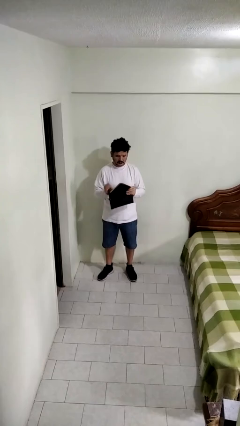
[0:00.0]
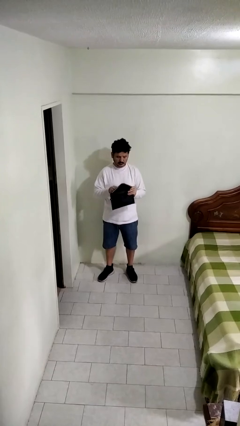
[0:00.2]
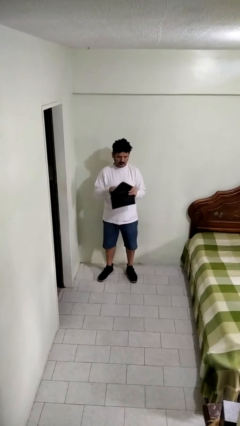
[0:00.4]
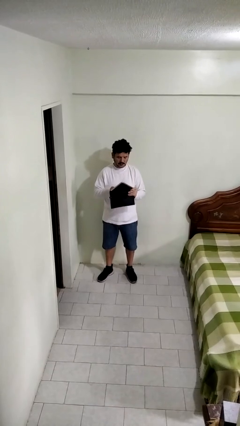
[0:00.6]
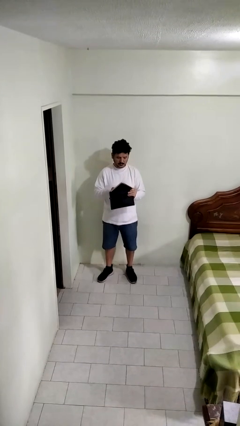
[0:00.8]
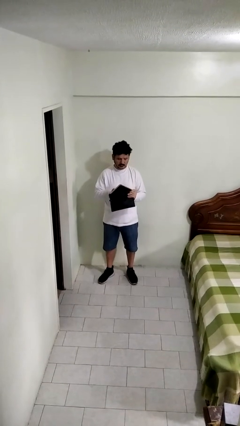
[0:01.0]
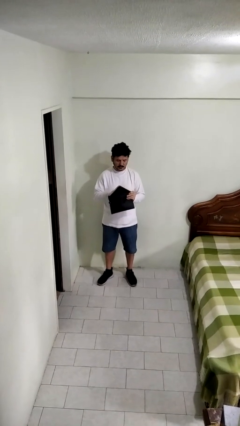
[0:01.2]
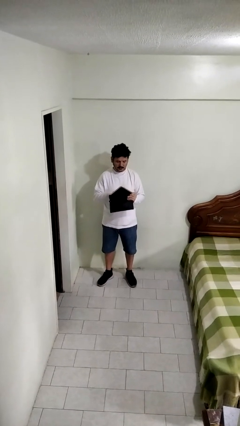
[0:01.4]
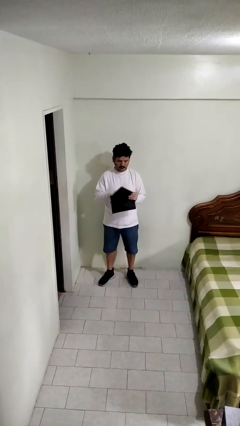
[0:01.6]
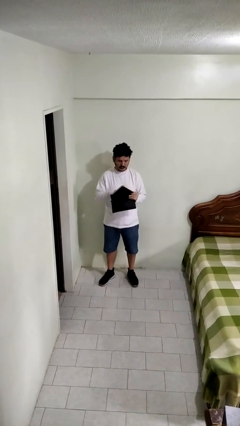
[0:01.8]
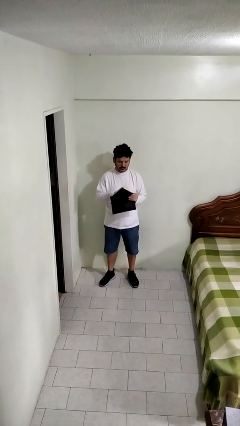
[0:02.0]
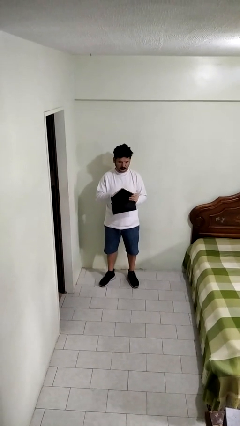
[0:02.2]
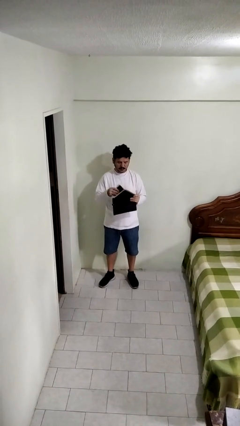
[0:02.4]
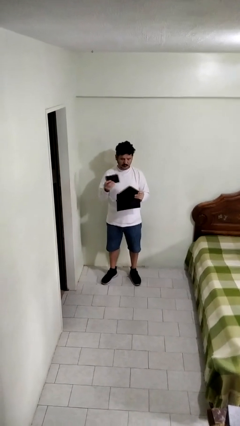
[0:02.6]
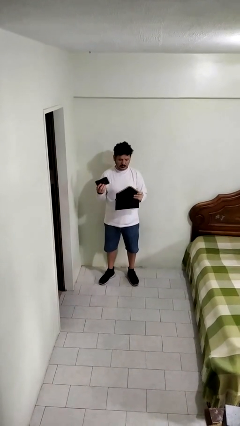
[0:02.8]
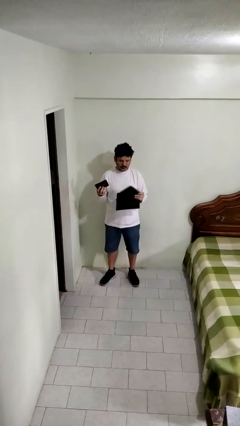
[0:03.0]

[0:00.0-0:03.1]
person searches in purse

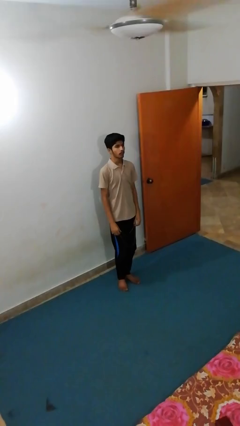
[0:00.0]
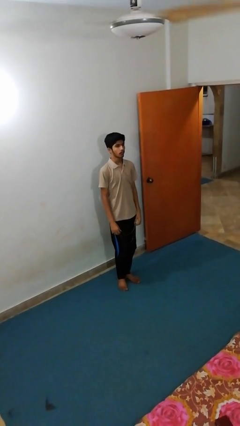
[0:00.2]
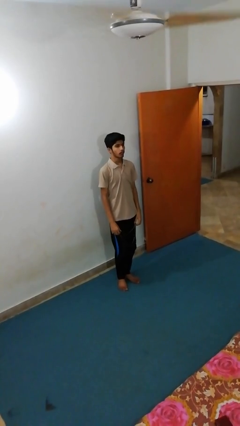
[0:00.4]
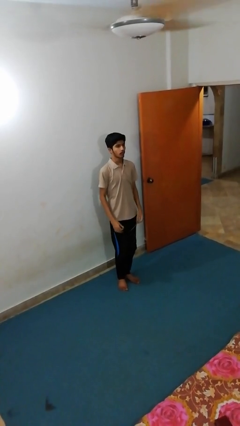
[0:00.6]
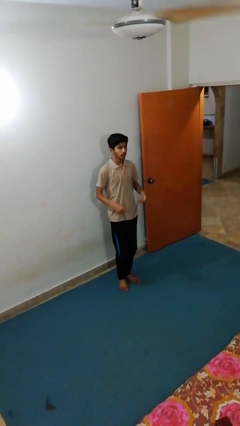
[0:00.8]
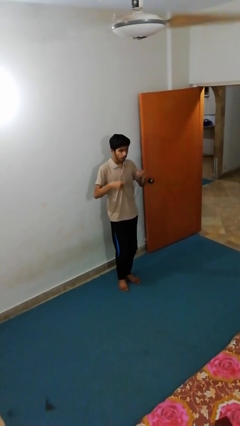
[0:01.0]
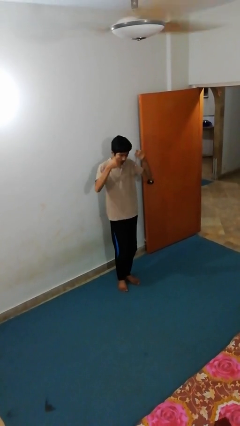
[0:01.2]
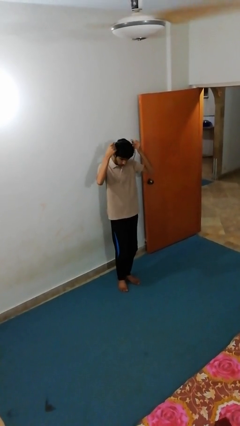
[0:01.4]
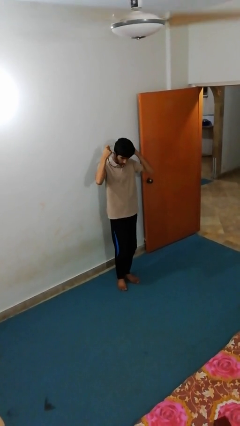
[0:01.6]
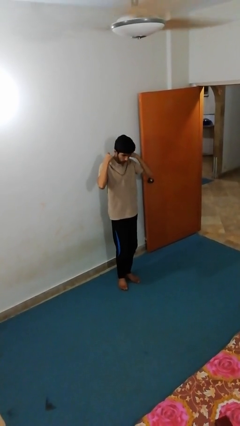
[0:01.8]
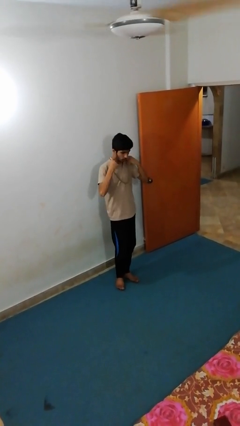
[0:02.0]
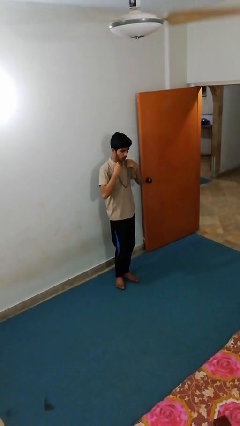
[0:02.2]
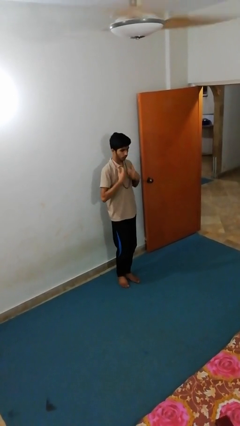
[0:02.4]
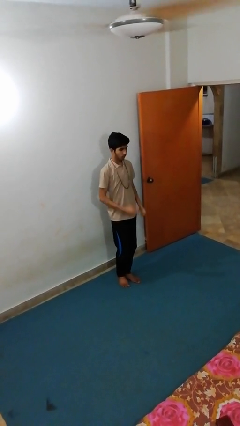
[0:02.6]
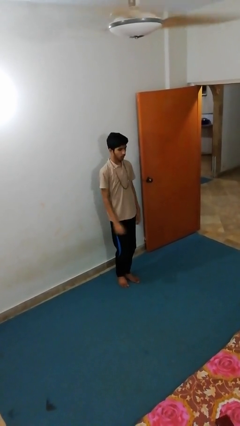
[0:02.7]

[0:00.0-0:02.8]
person puts on necklace

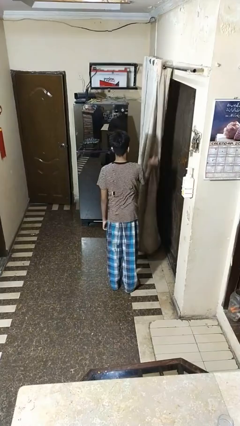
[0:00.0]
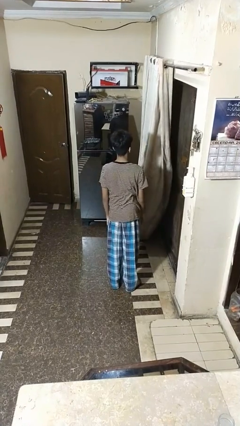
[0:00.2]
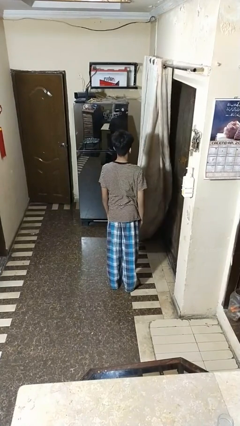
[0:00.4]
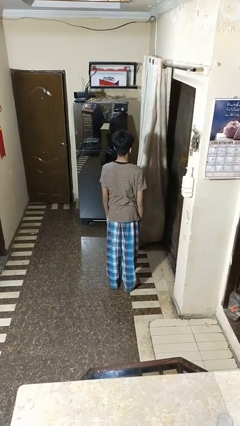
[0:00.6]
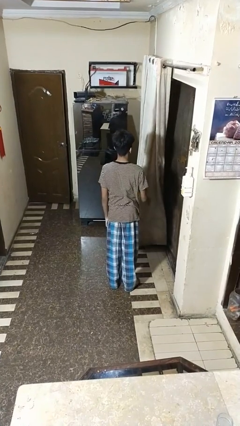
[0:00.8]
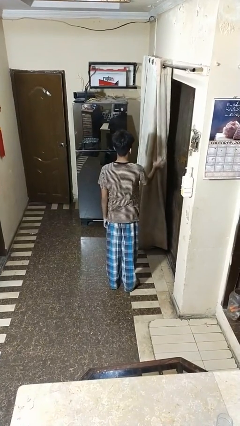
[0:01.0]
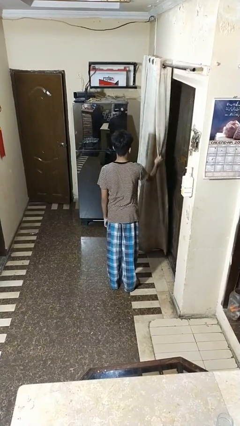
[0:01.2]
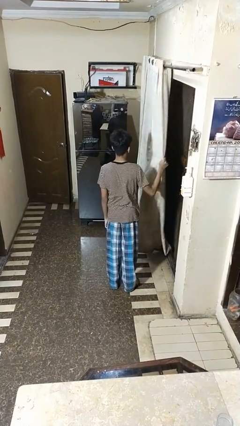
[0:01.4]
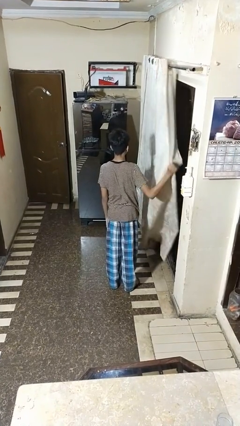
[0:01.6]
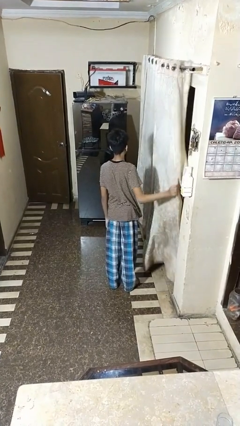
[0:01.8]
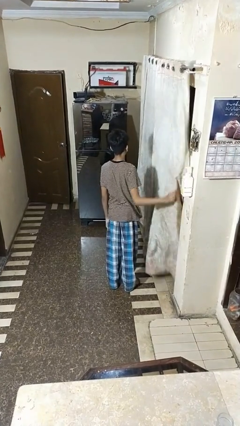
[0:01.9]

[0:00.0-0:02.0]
person closes curtains

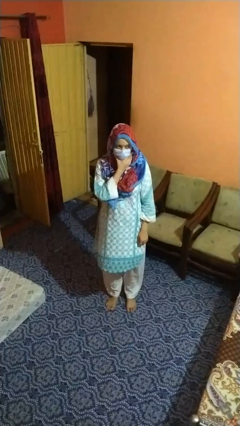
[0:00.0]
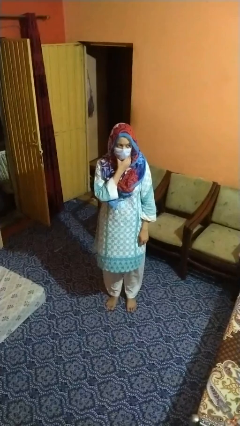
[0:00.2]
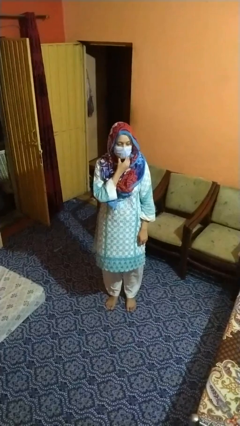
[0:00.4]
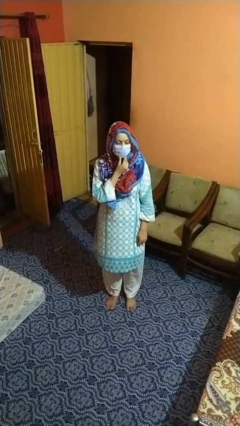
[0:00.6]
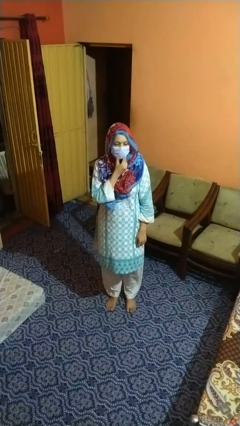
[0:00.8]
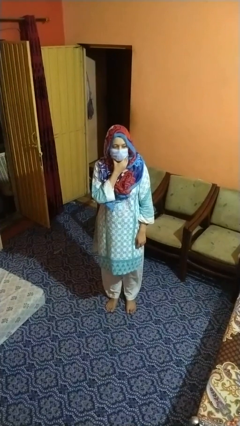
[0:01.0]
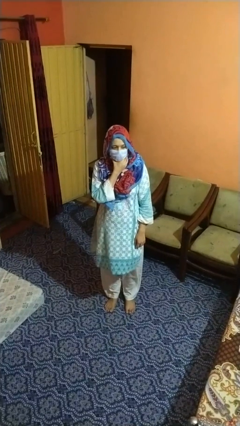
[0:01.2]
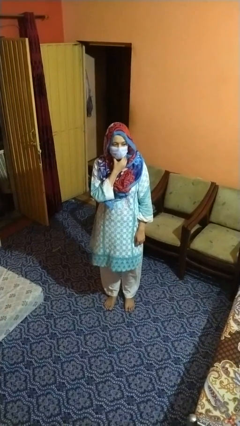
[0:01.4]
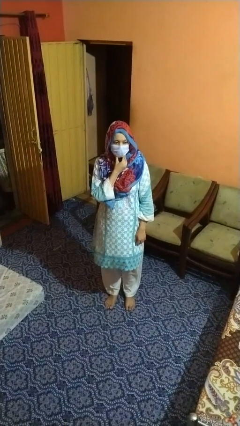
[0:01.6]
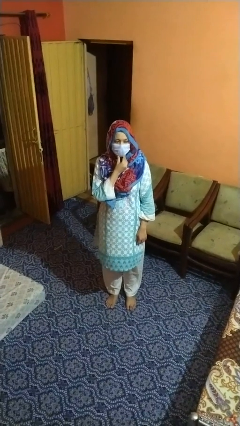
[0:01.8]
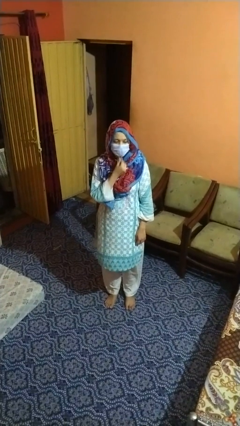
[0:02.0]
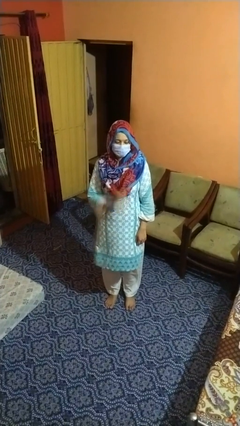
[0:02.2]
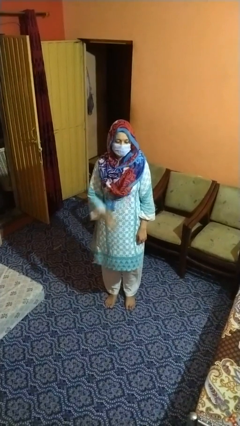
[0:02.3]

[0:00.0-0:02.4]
person strokes chin

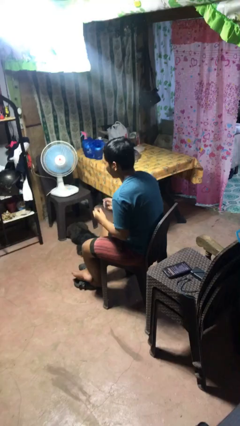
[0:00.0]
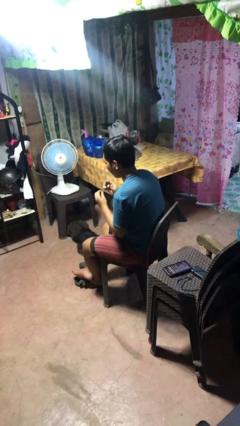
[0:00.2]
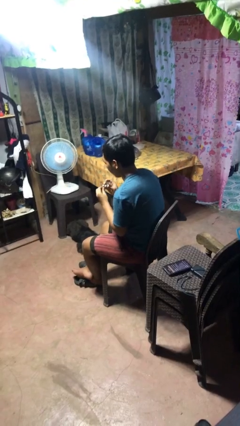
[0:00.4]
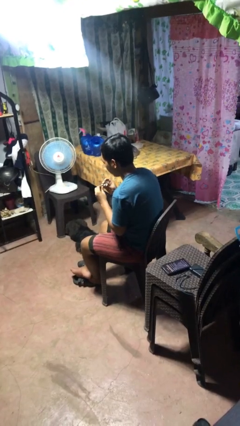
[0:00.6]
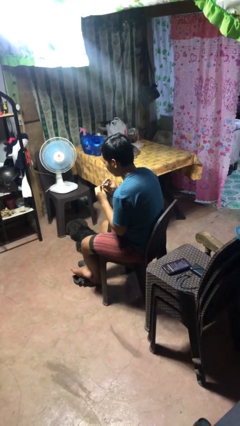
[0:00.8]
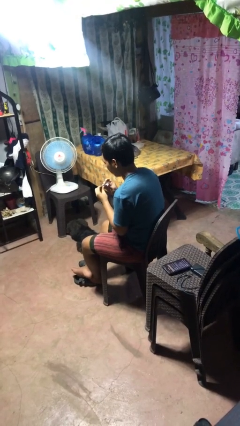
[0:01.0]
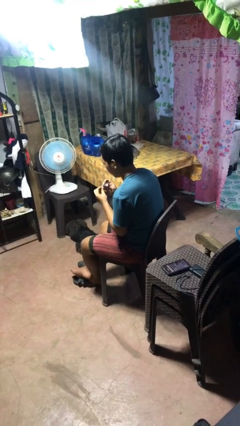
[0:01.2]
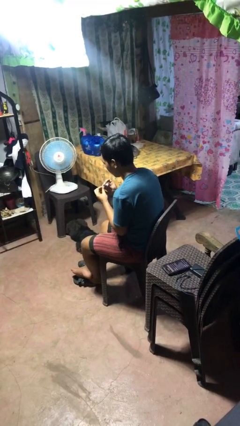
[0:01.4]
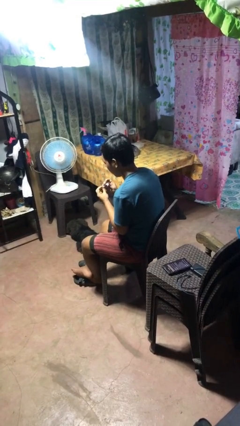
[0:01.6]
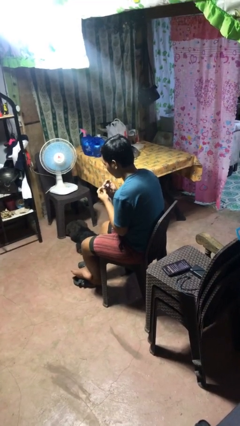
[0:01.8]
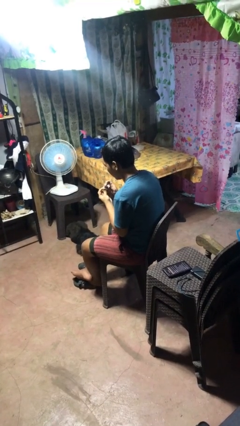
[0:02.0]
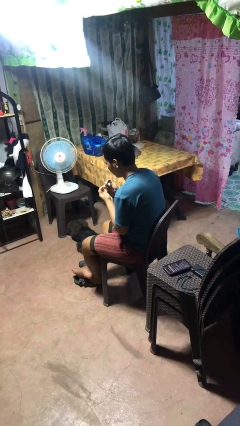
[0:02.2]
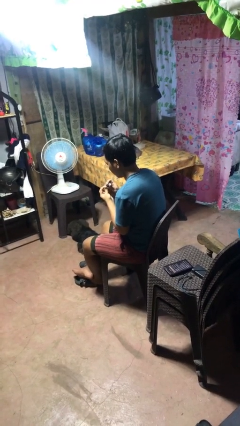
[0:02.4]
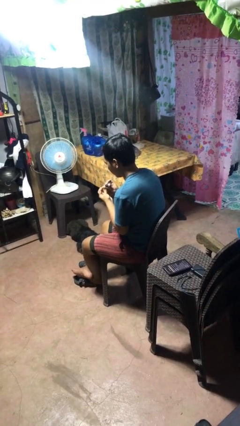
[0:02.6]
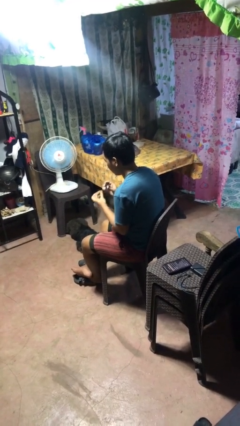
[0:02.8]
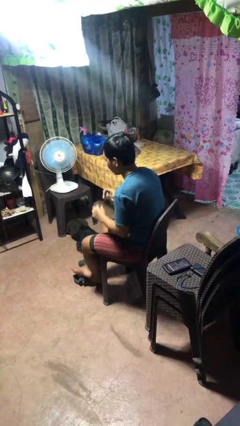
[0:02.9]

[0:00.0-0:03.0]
person clips fingernails

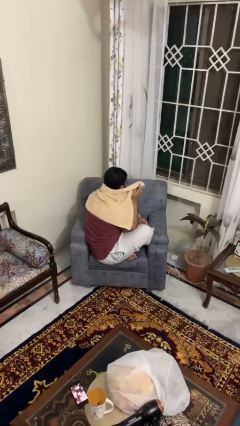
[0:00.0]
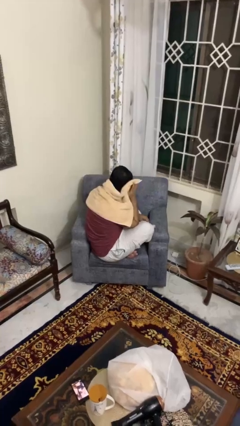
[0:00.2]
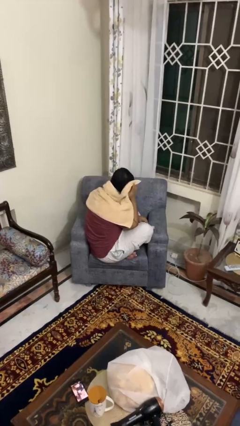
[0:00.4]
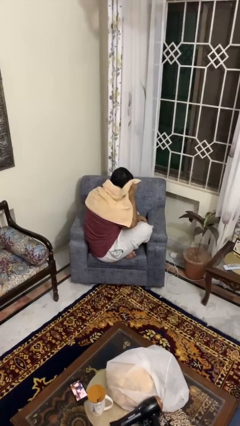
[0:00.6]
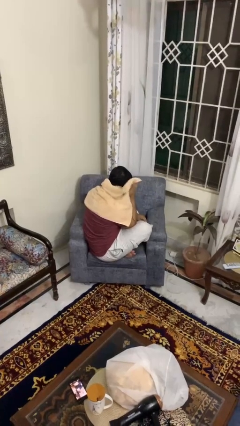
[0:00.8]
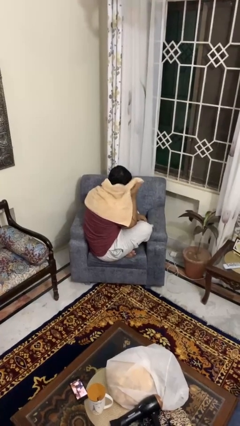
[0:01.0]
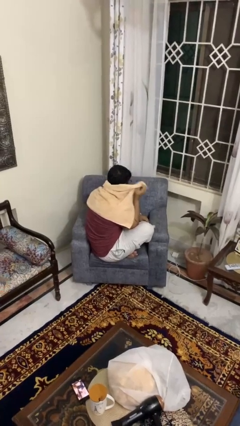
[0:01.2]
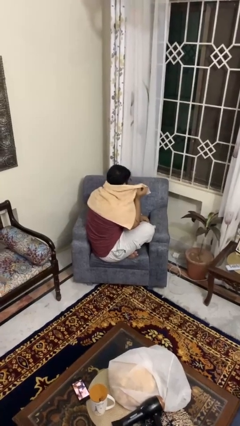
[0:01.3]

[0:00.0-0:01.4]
person dries hair with towel

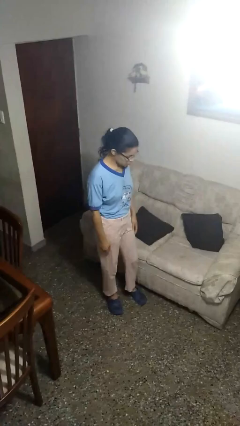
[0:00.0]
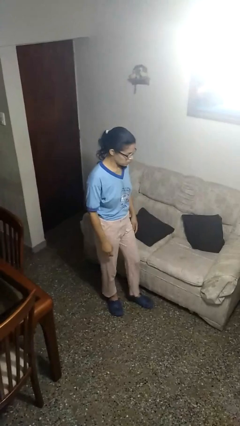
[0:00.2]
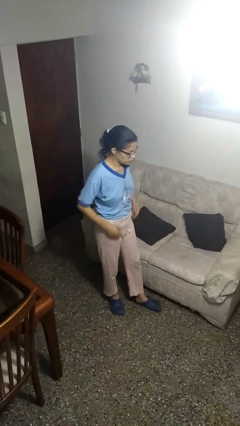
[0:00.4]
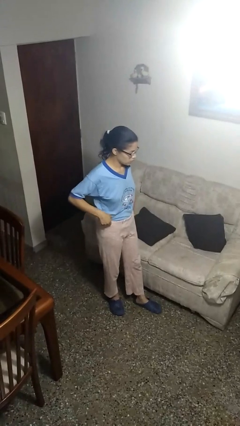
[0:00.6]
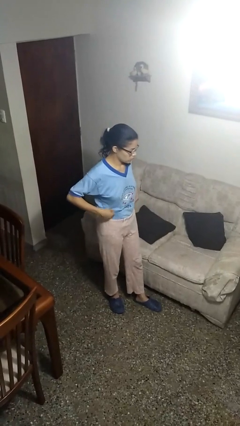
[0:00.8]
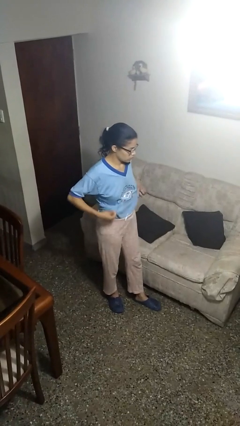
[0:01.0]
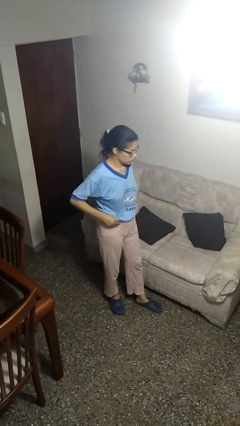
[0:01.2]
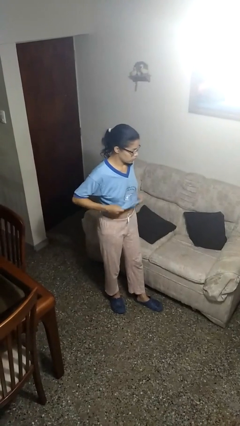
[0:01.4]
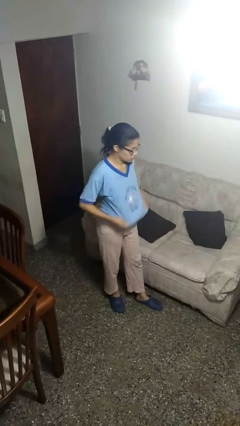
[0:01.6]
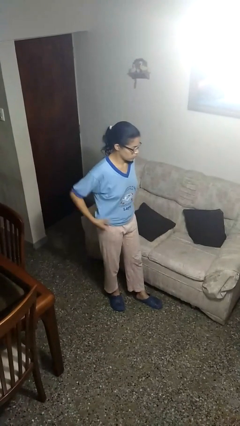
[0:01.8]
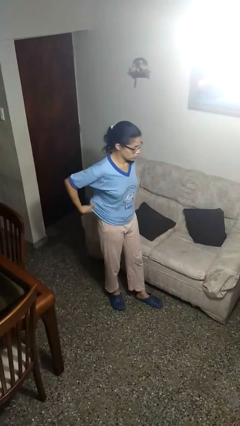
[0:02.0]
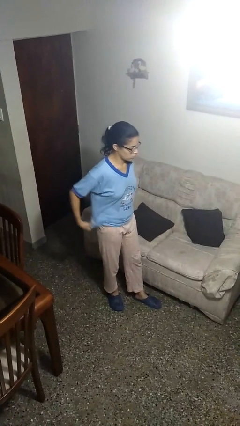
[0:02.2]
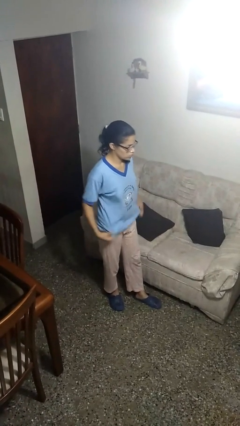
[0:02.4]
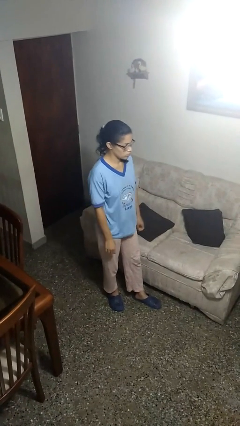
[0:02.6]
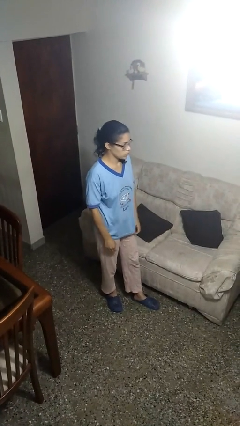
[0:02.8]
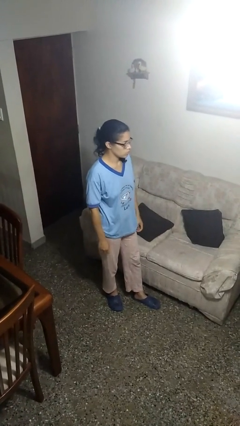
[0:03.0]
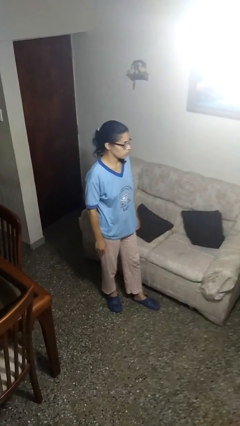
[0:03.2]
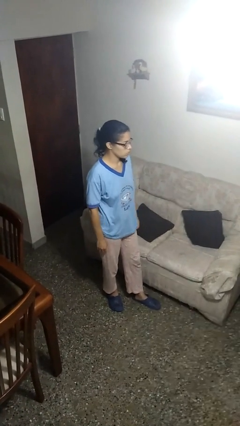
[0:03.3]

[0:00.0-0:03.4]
person untucks shirt
